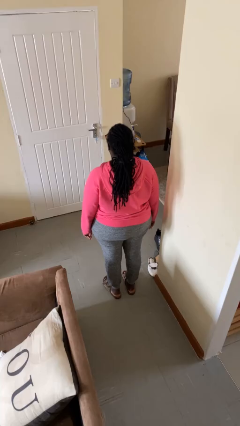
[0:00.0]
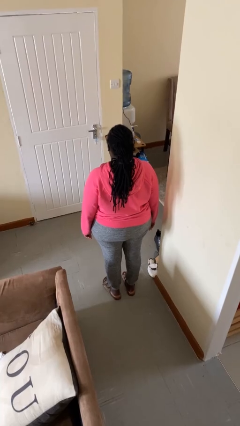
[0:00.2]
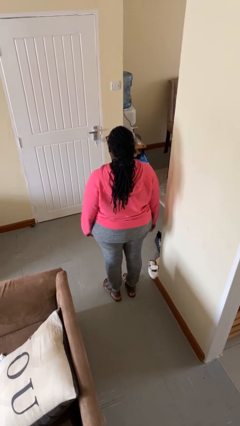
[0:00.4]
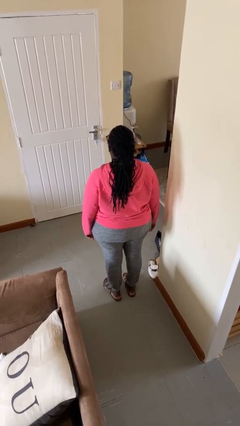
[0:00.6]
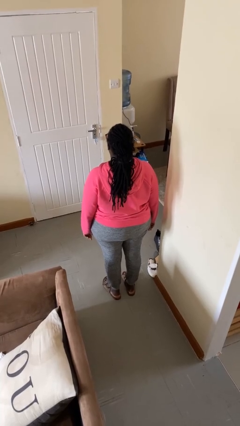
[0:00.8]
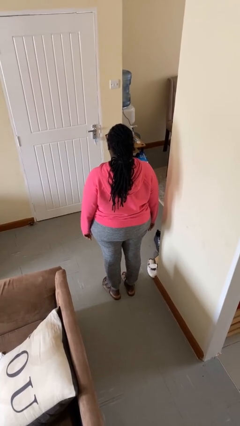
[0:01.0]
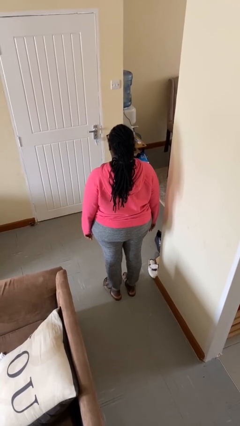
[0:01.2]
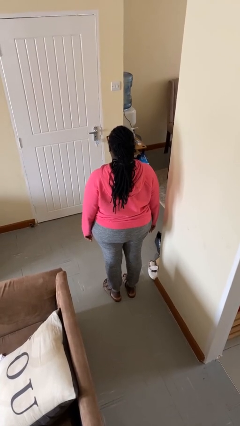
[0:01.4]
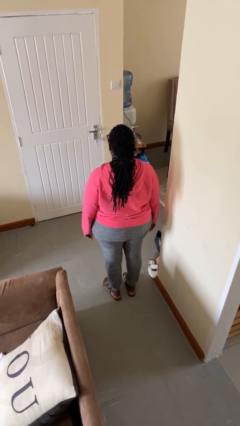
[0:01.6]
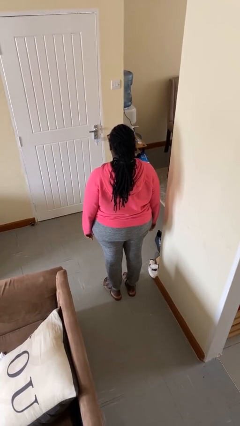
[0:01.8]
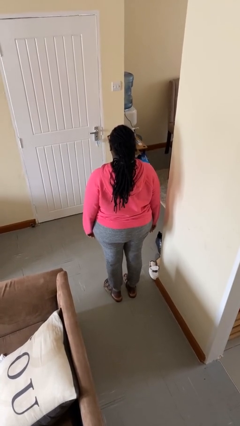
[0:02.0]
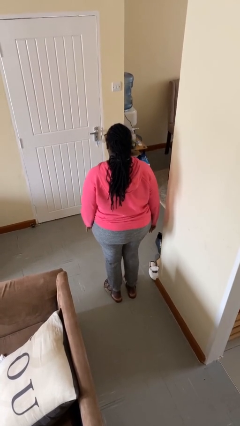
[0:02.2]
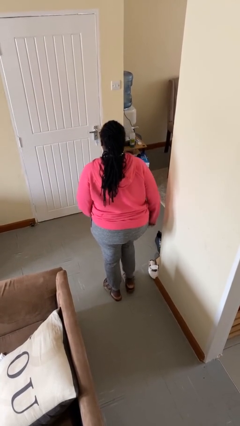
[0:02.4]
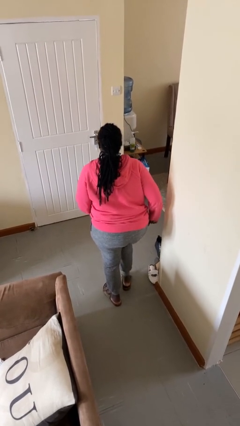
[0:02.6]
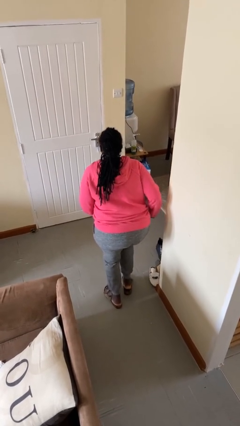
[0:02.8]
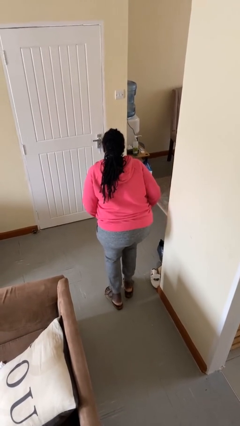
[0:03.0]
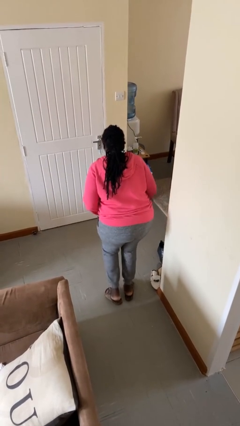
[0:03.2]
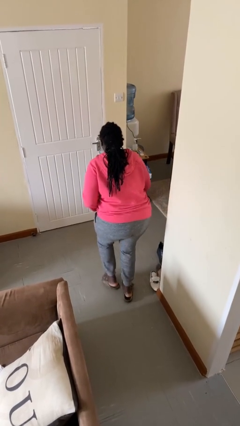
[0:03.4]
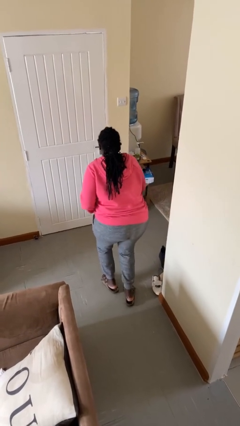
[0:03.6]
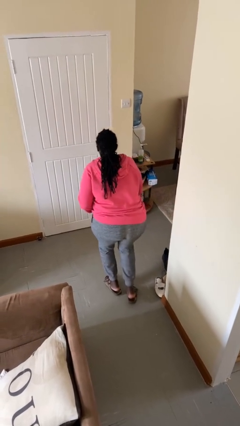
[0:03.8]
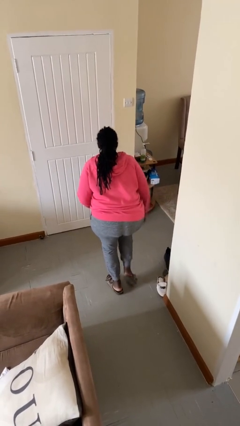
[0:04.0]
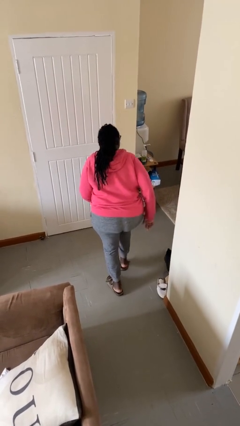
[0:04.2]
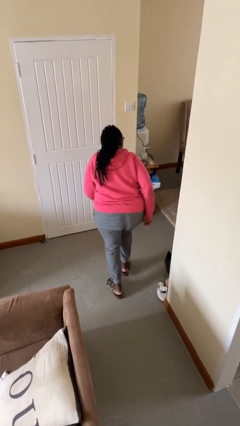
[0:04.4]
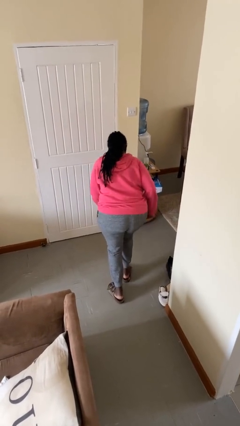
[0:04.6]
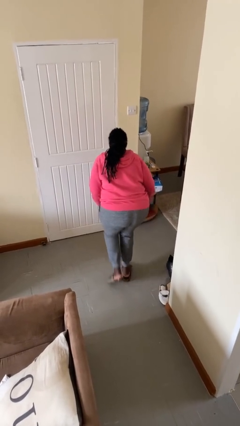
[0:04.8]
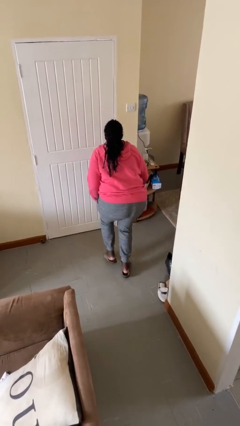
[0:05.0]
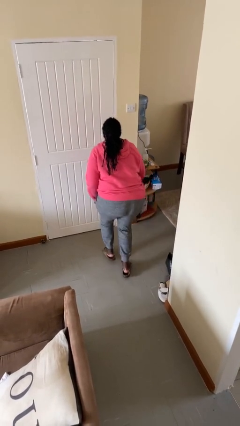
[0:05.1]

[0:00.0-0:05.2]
person walks tiptoe

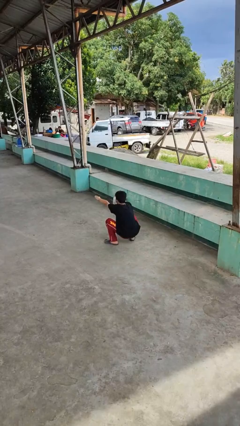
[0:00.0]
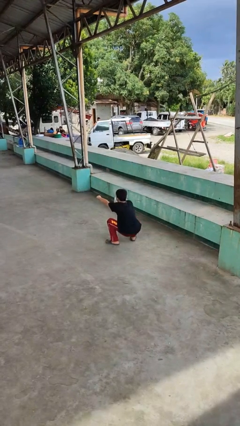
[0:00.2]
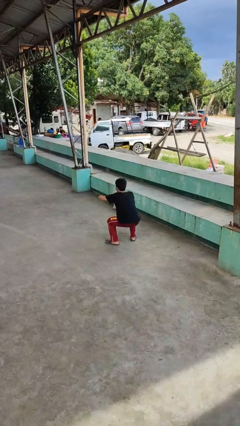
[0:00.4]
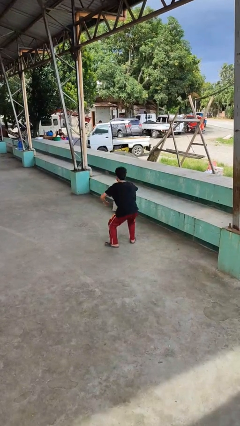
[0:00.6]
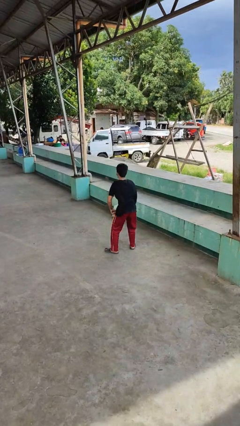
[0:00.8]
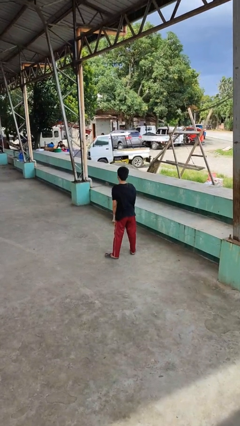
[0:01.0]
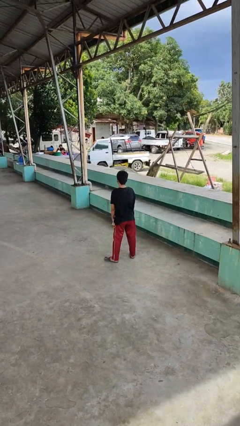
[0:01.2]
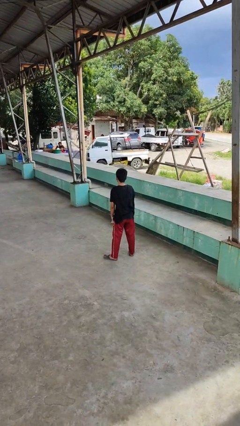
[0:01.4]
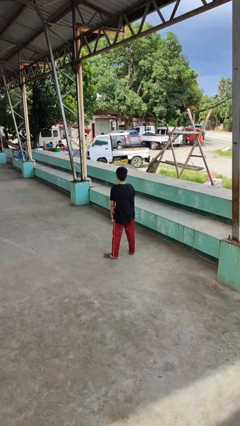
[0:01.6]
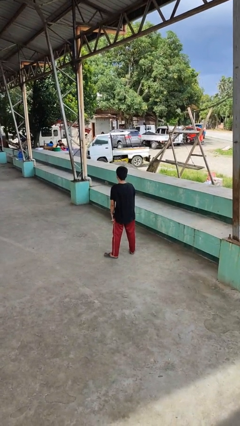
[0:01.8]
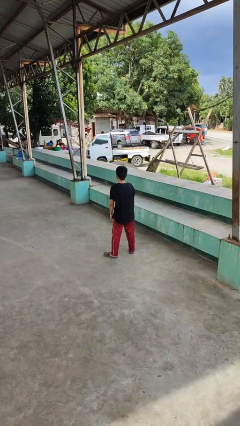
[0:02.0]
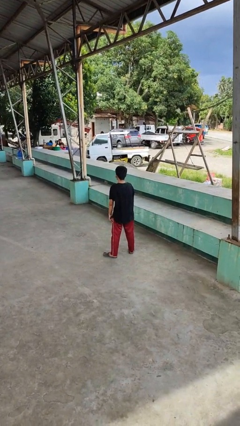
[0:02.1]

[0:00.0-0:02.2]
person stands up

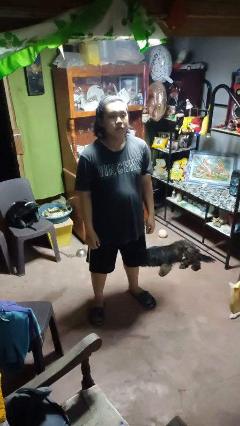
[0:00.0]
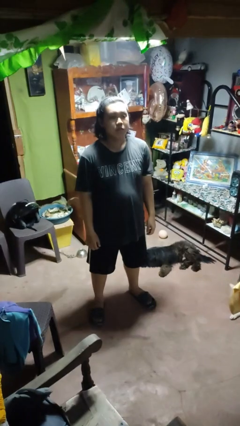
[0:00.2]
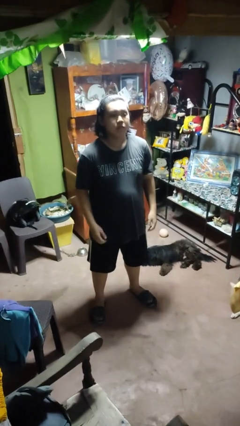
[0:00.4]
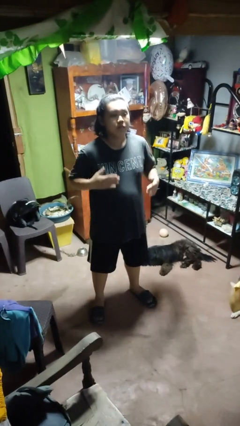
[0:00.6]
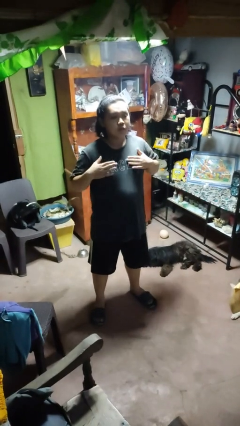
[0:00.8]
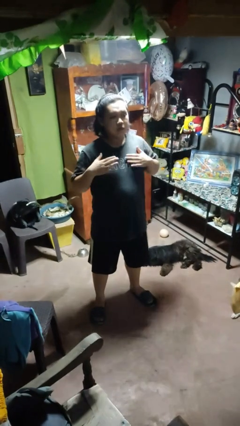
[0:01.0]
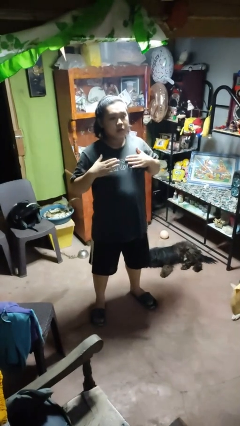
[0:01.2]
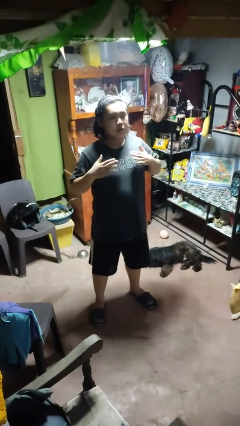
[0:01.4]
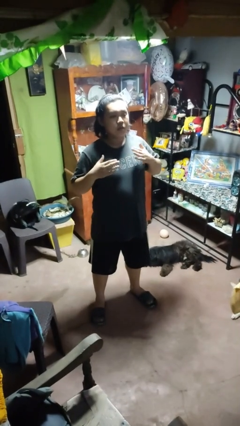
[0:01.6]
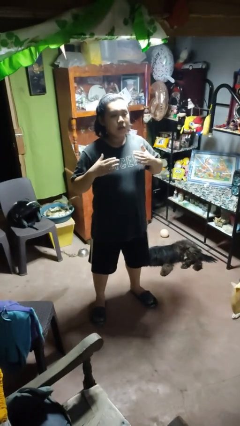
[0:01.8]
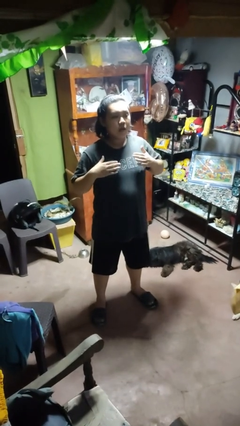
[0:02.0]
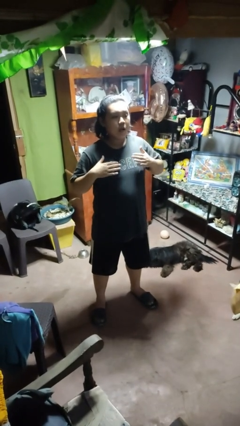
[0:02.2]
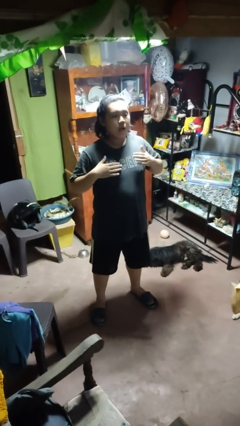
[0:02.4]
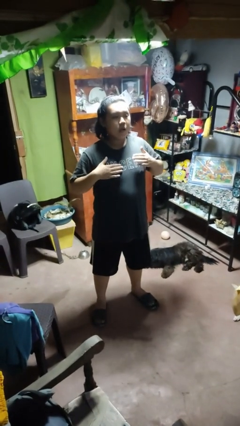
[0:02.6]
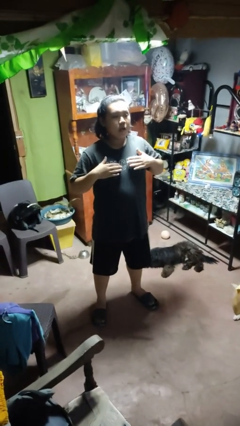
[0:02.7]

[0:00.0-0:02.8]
person drums on chest

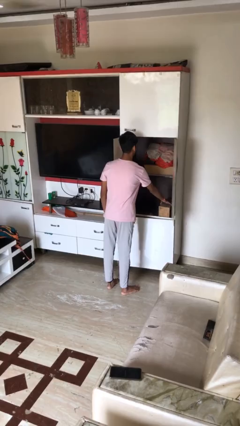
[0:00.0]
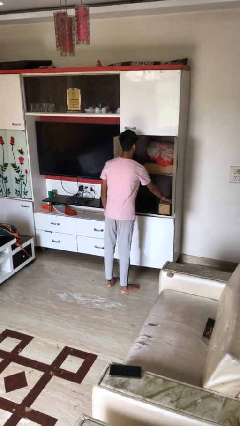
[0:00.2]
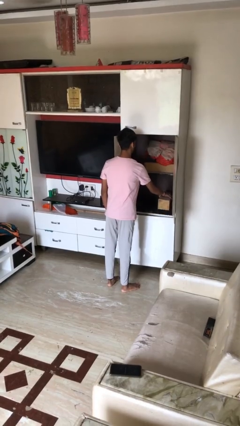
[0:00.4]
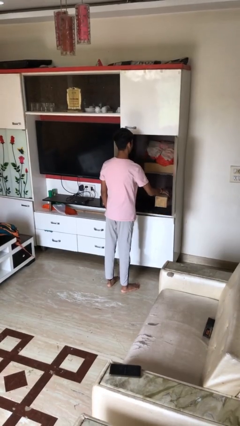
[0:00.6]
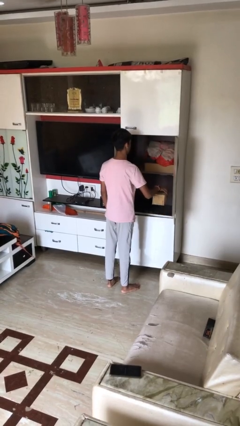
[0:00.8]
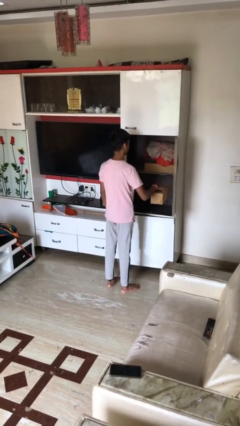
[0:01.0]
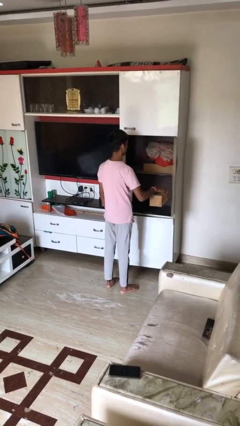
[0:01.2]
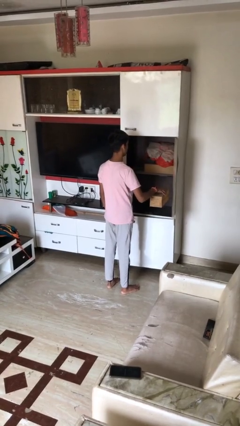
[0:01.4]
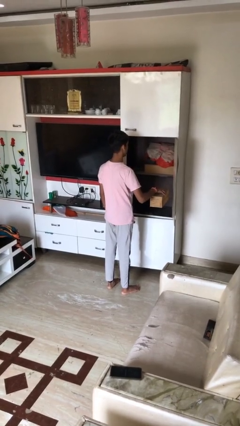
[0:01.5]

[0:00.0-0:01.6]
person picks up object from cabinet

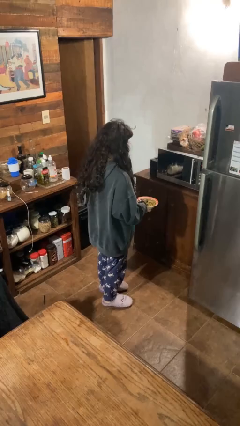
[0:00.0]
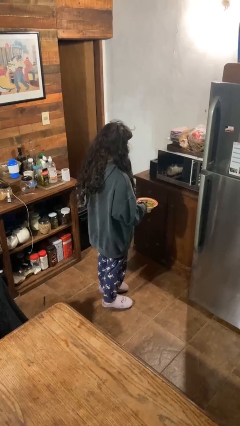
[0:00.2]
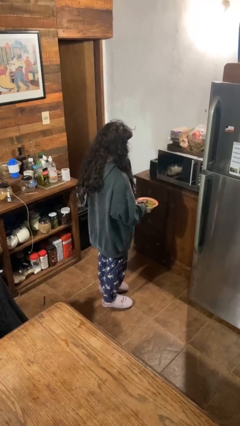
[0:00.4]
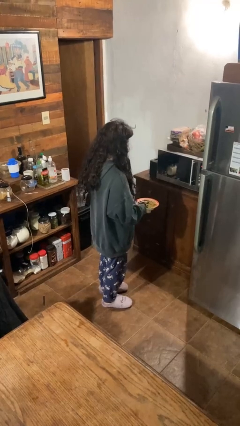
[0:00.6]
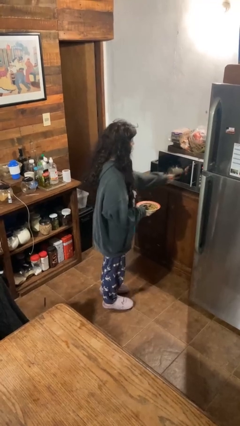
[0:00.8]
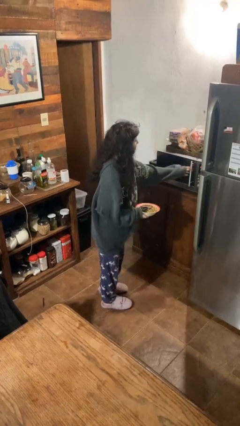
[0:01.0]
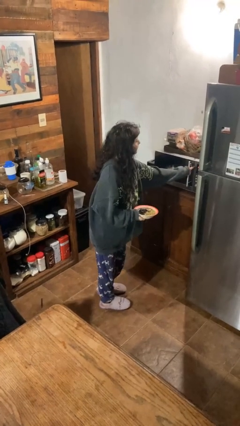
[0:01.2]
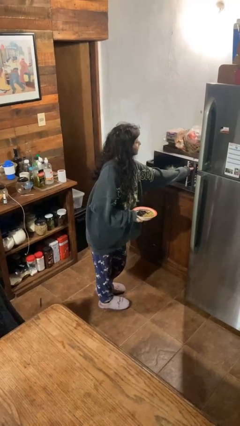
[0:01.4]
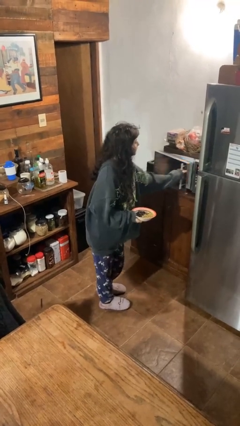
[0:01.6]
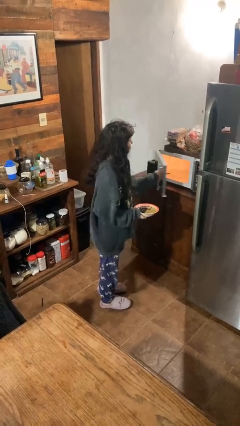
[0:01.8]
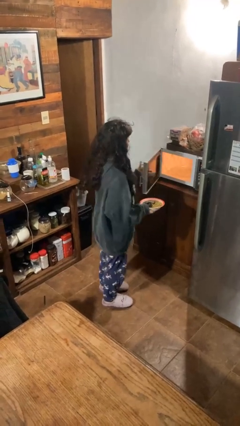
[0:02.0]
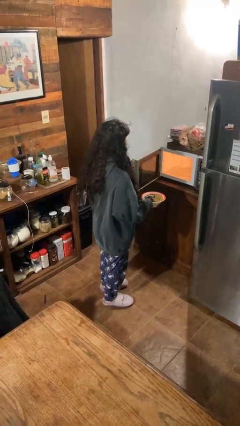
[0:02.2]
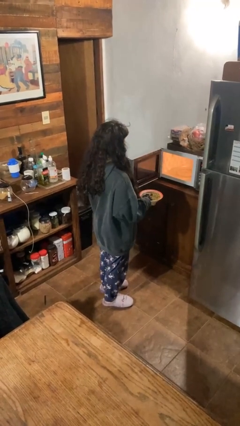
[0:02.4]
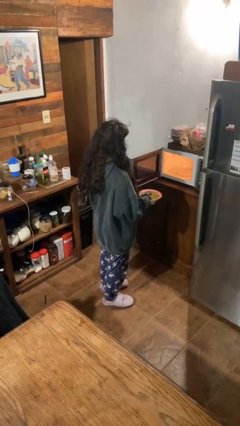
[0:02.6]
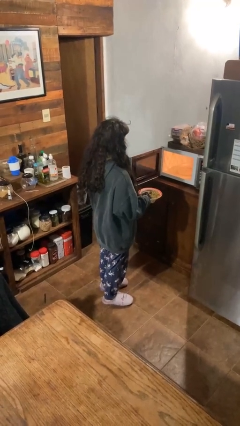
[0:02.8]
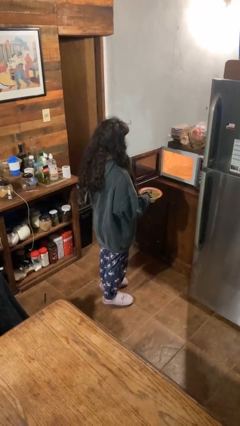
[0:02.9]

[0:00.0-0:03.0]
person opens microwave

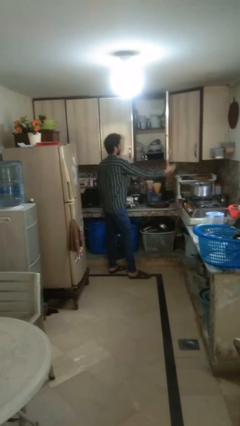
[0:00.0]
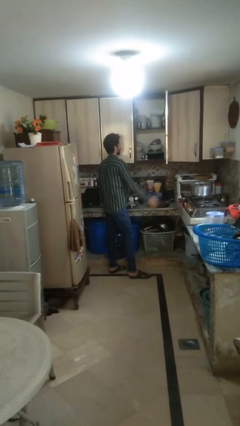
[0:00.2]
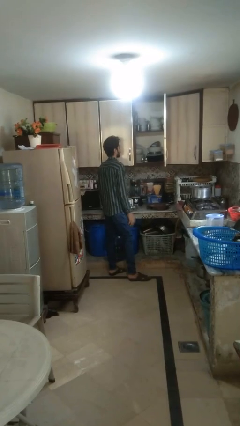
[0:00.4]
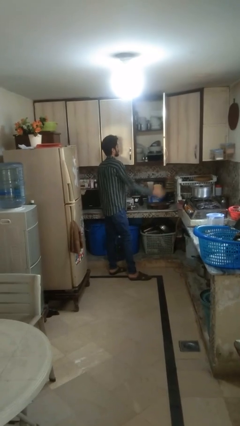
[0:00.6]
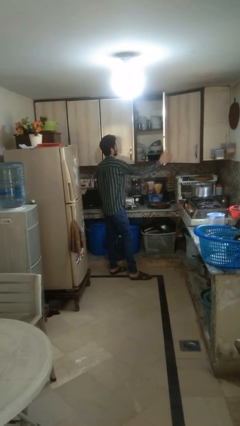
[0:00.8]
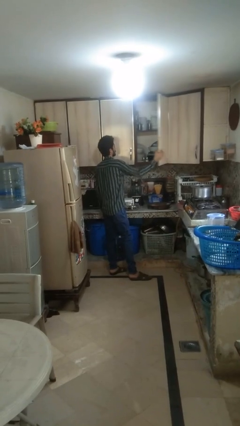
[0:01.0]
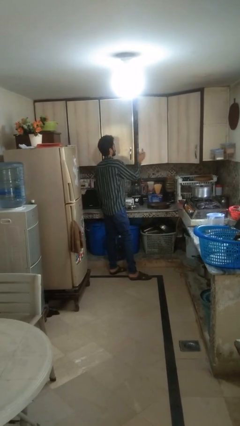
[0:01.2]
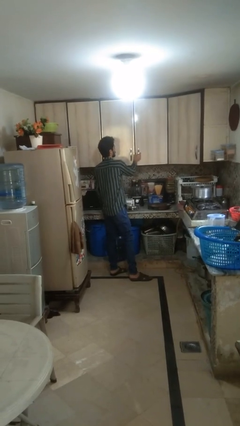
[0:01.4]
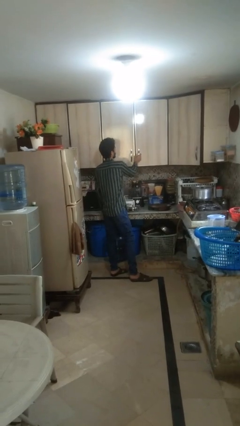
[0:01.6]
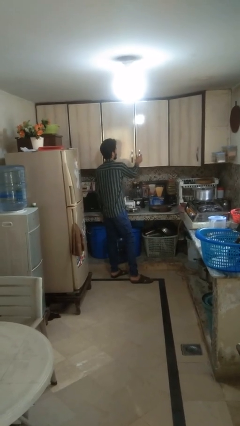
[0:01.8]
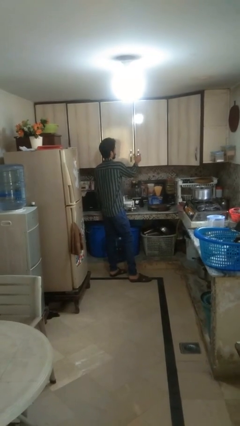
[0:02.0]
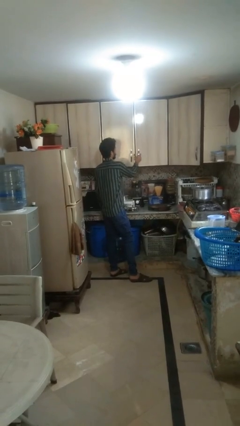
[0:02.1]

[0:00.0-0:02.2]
person closes cabinet

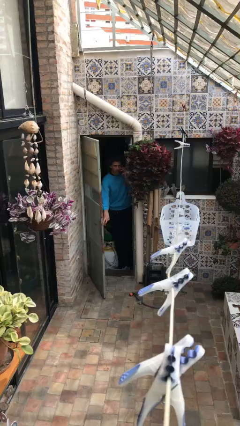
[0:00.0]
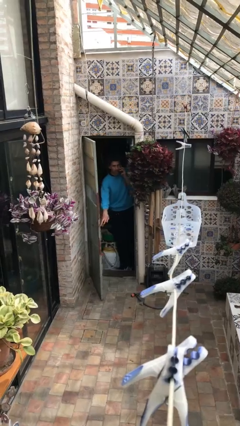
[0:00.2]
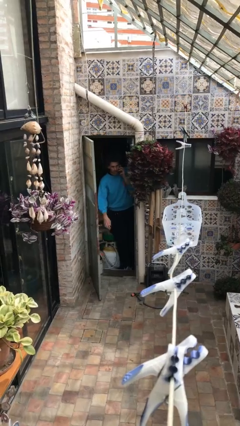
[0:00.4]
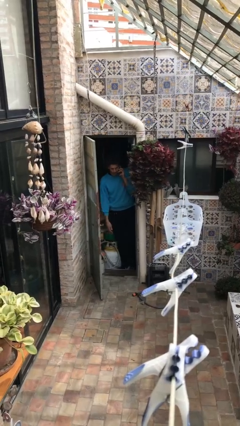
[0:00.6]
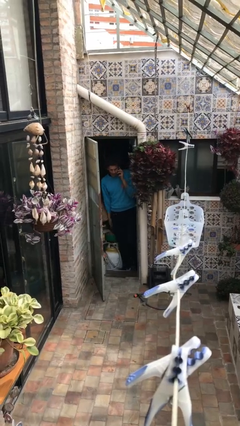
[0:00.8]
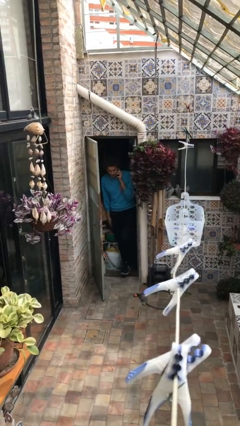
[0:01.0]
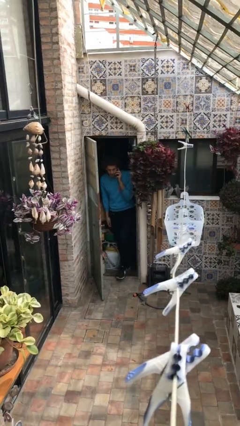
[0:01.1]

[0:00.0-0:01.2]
person opens facility door
